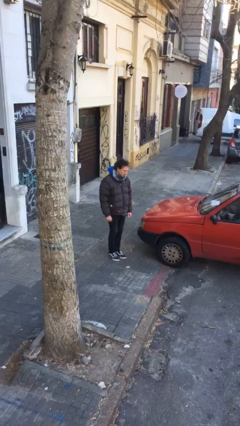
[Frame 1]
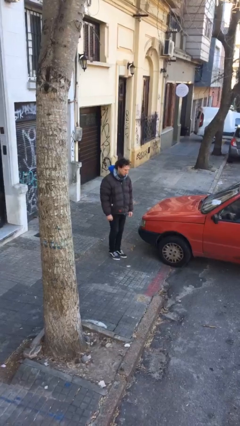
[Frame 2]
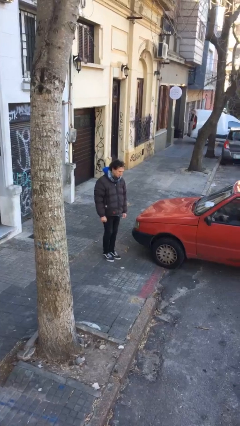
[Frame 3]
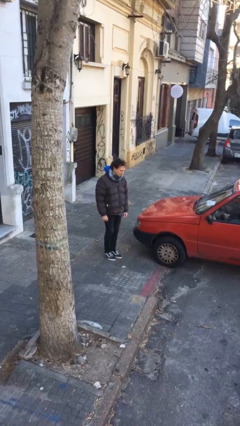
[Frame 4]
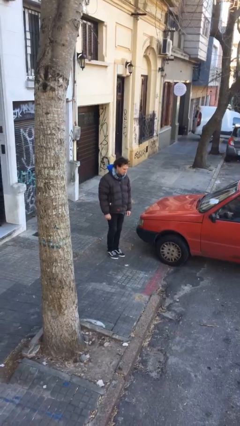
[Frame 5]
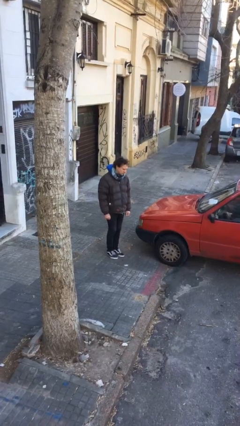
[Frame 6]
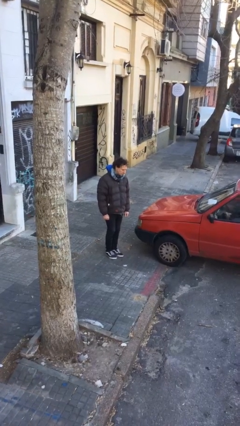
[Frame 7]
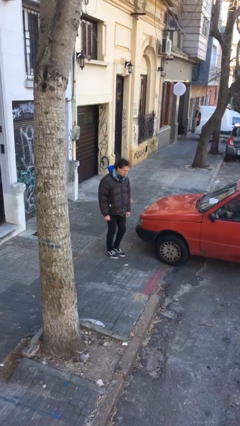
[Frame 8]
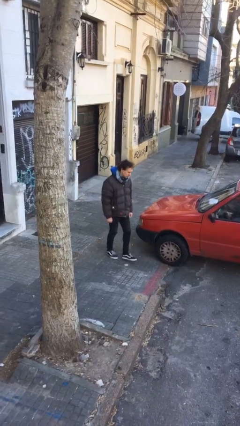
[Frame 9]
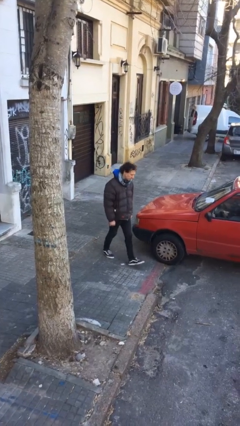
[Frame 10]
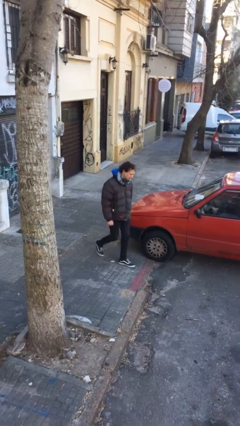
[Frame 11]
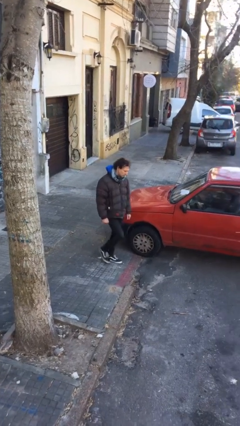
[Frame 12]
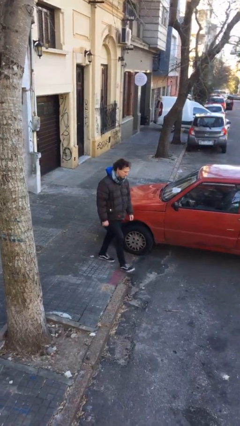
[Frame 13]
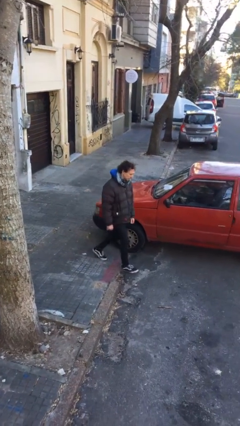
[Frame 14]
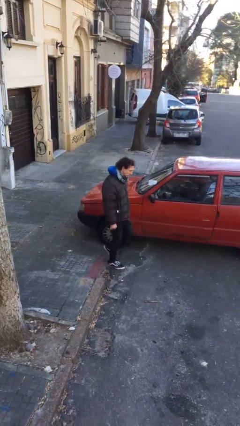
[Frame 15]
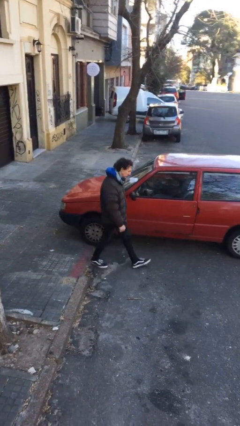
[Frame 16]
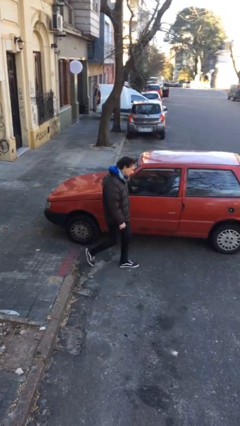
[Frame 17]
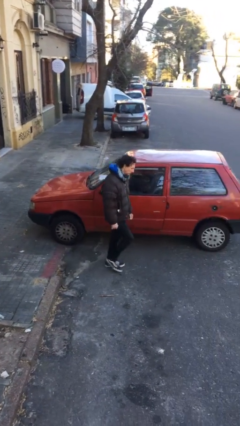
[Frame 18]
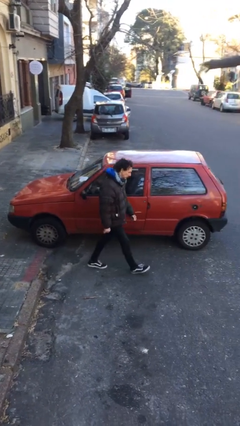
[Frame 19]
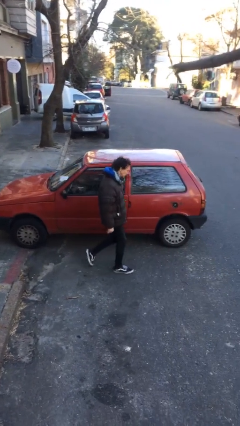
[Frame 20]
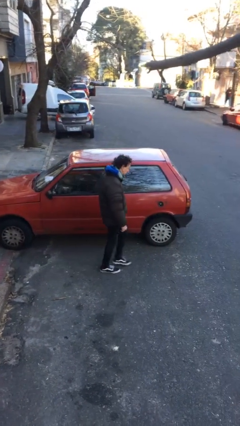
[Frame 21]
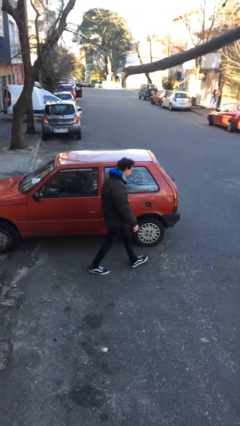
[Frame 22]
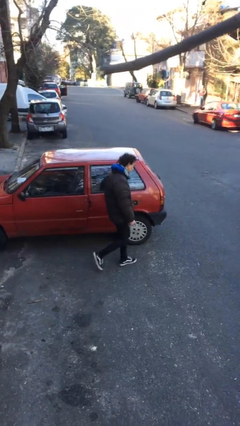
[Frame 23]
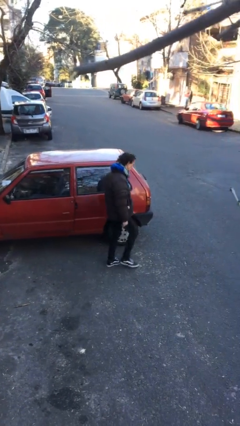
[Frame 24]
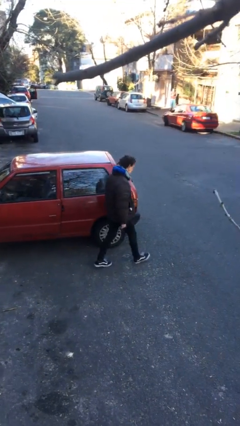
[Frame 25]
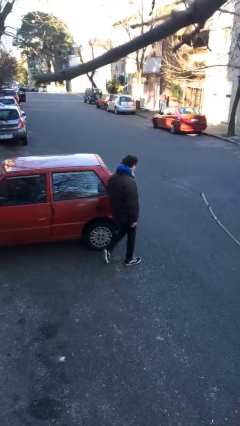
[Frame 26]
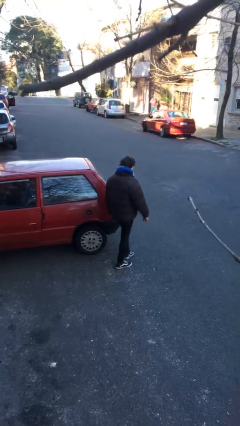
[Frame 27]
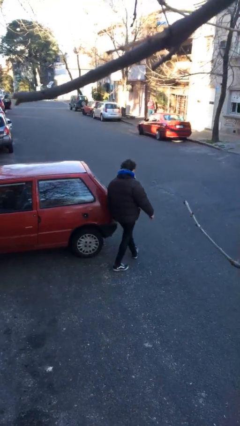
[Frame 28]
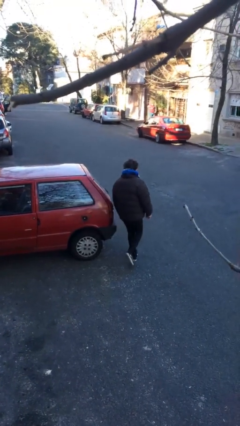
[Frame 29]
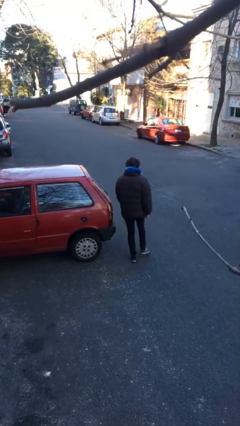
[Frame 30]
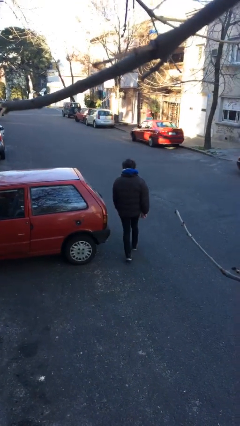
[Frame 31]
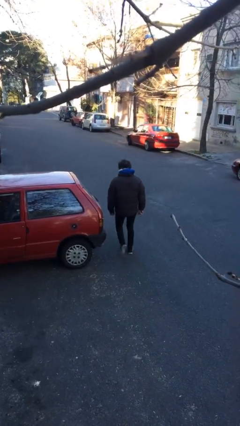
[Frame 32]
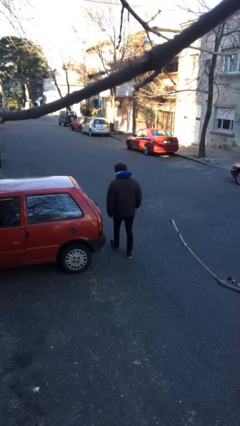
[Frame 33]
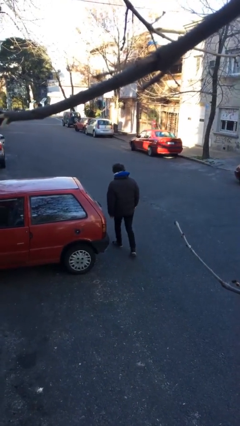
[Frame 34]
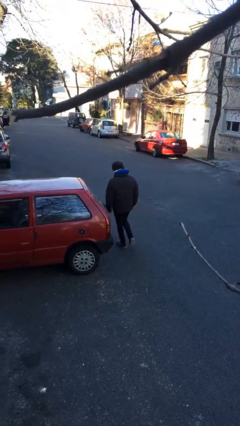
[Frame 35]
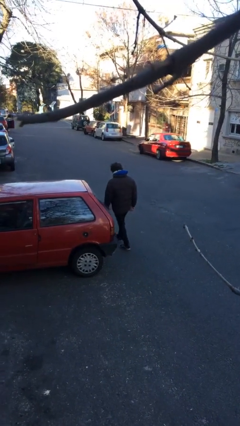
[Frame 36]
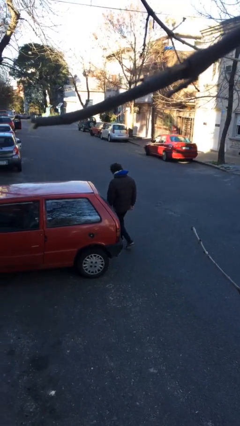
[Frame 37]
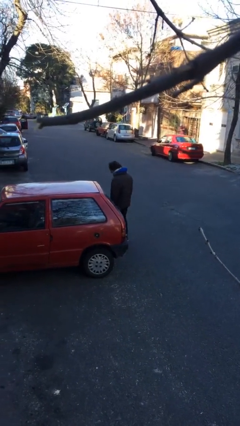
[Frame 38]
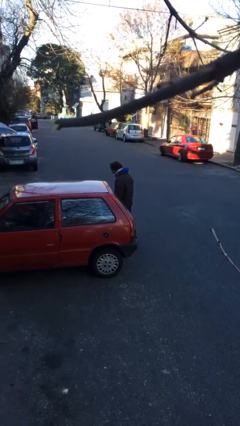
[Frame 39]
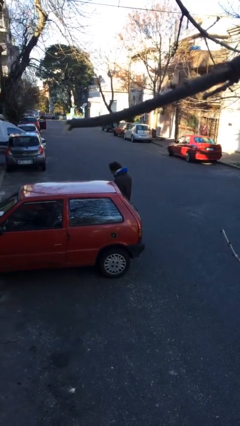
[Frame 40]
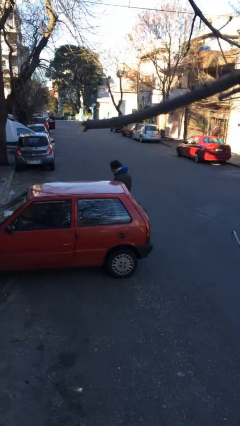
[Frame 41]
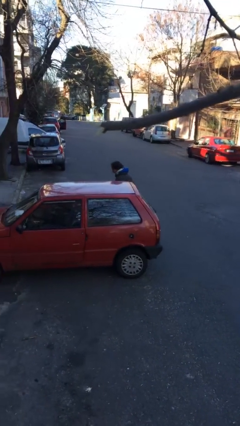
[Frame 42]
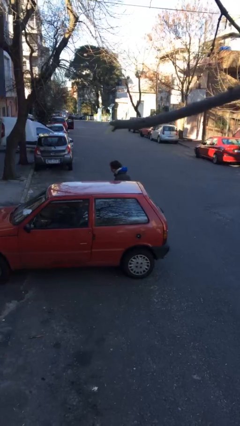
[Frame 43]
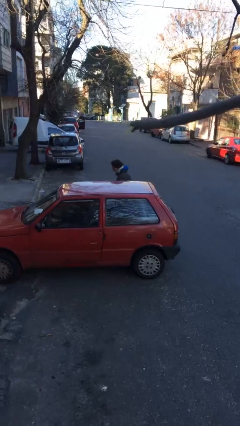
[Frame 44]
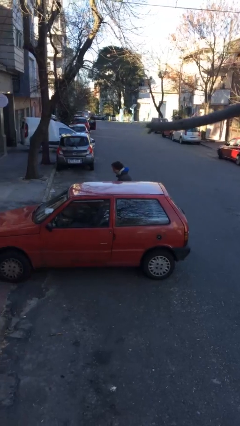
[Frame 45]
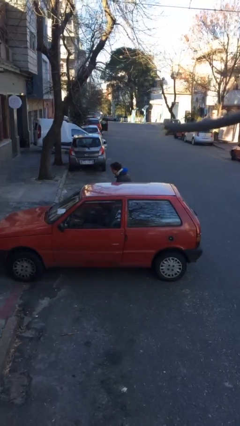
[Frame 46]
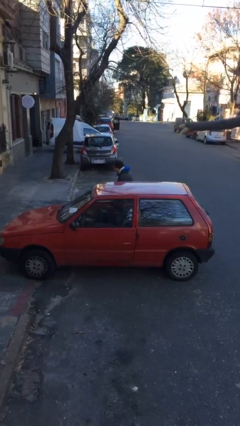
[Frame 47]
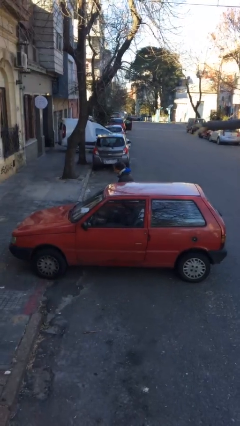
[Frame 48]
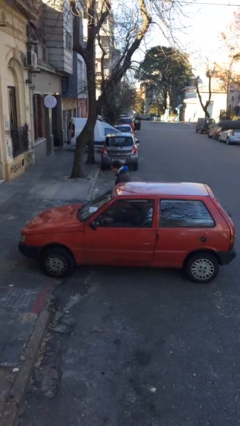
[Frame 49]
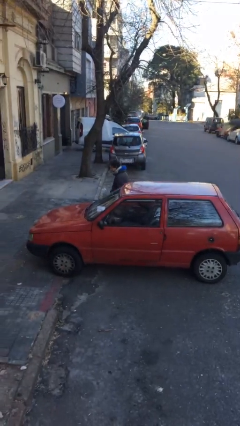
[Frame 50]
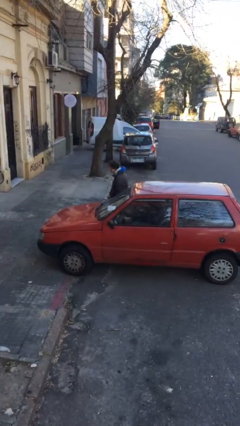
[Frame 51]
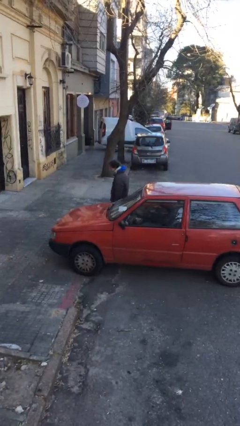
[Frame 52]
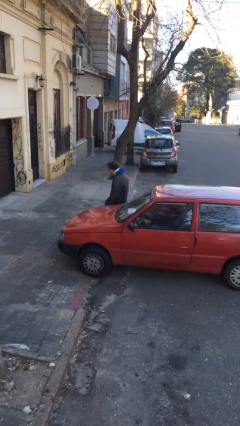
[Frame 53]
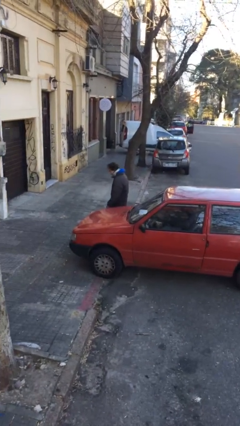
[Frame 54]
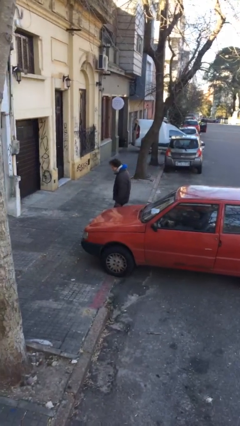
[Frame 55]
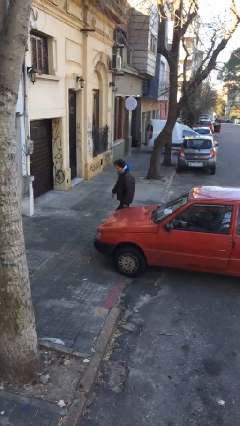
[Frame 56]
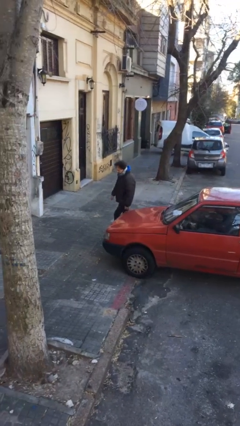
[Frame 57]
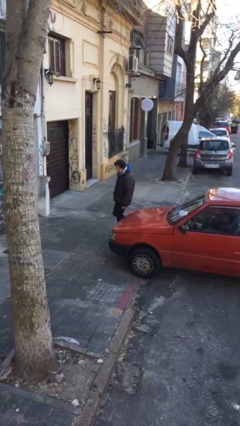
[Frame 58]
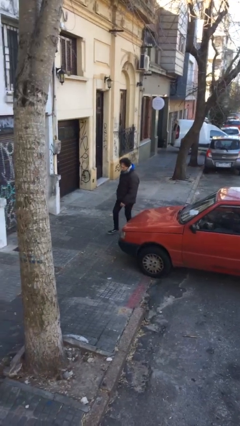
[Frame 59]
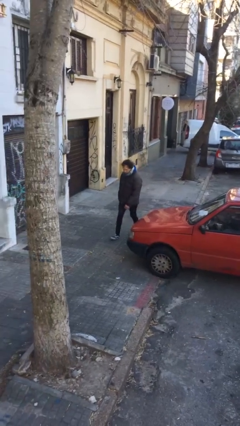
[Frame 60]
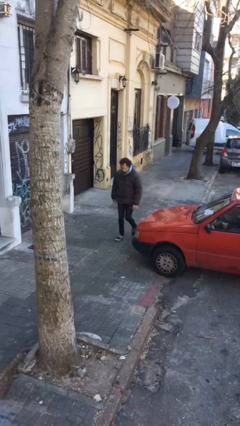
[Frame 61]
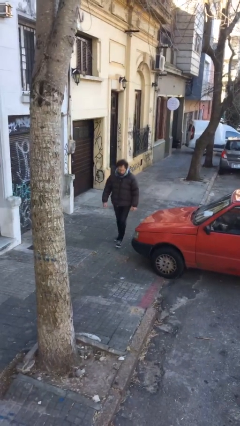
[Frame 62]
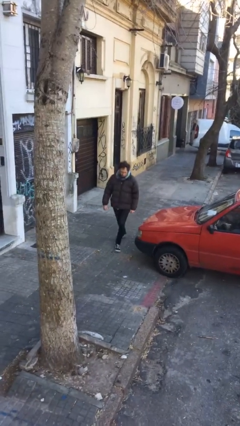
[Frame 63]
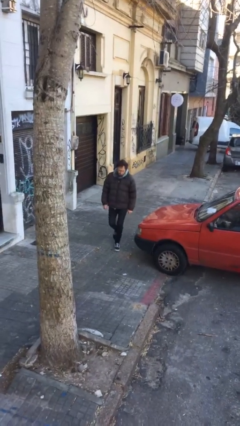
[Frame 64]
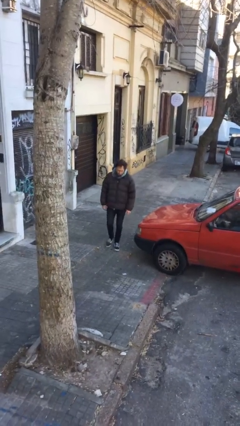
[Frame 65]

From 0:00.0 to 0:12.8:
person walks around car

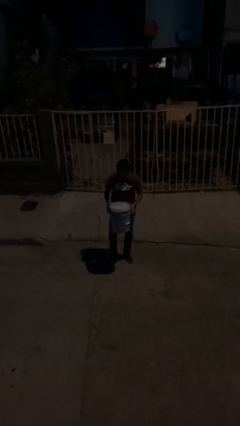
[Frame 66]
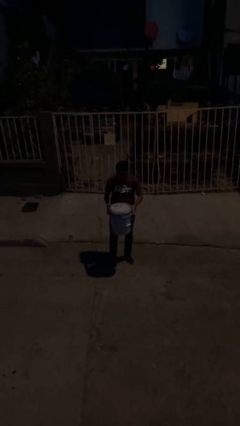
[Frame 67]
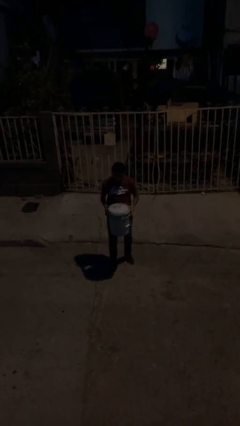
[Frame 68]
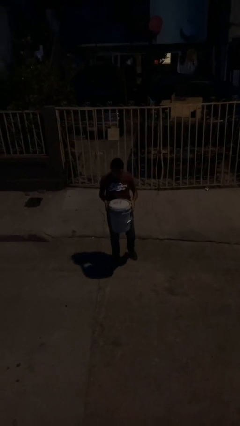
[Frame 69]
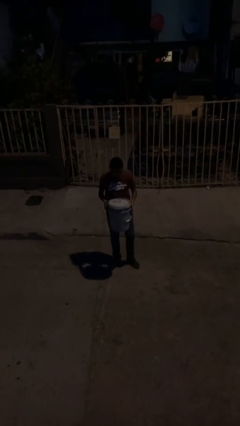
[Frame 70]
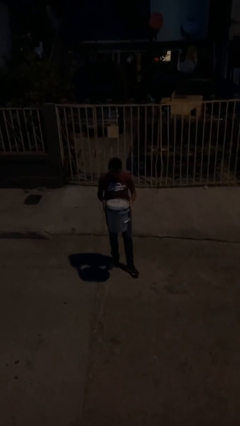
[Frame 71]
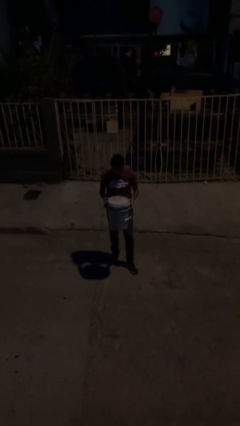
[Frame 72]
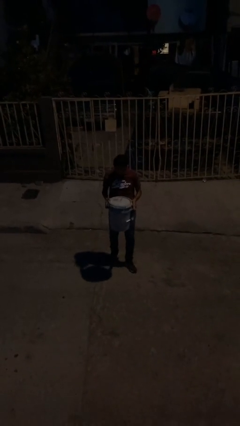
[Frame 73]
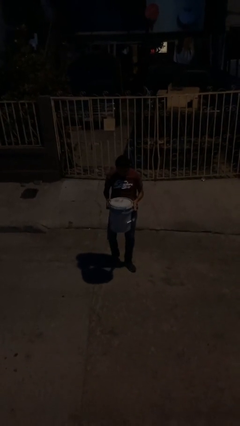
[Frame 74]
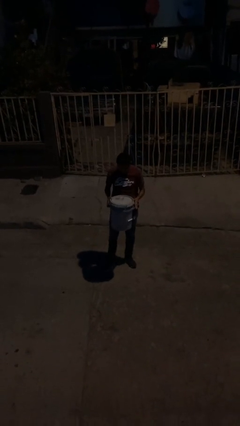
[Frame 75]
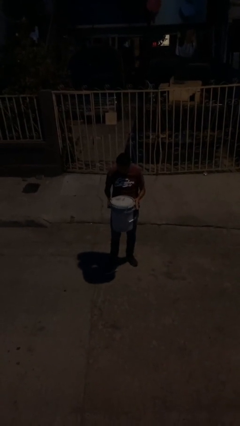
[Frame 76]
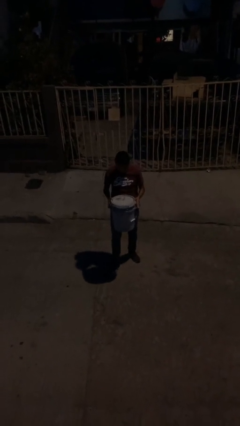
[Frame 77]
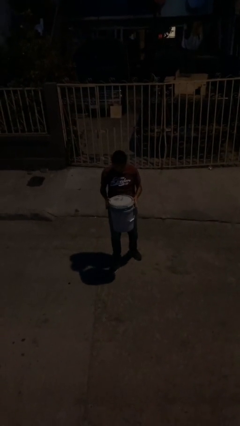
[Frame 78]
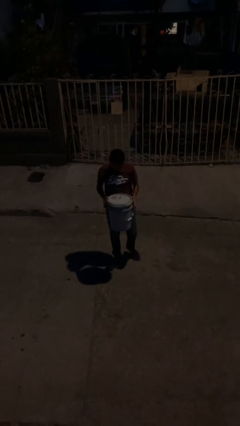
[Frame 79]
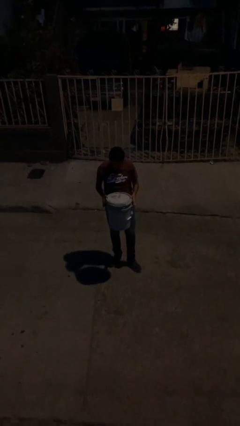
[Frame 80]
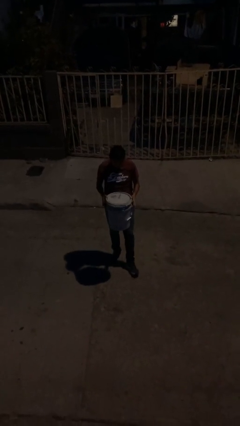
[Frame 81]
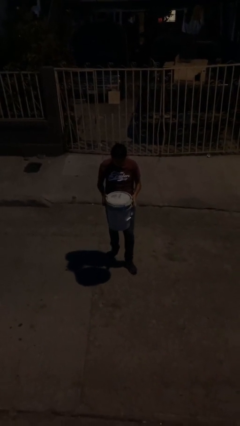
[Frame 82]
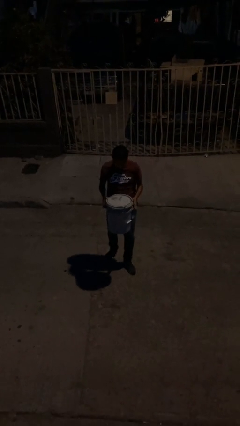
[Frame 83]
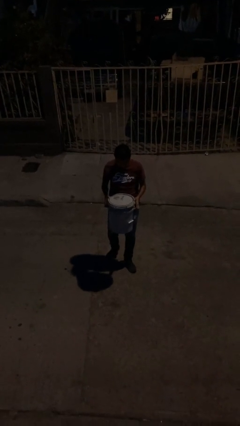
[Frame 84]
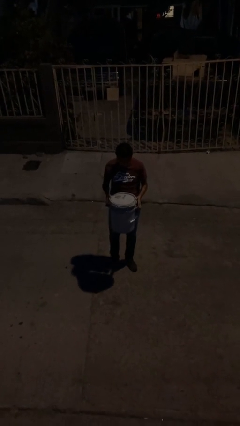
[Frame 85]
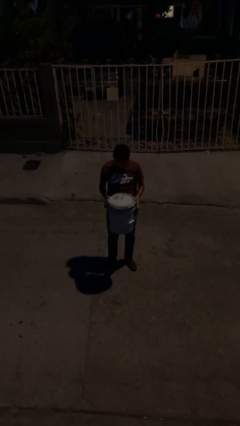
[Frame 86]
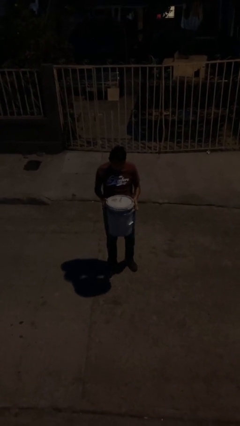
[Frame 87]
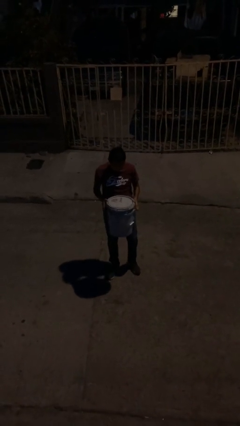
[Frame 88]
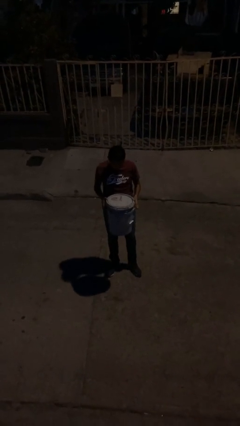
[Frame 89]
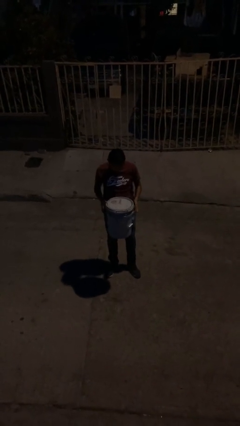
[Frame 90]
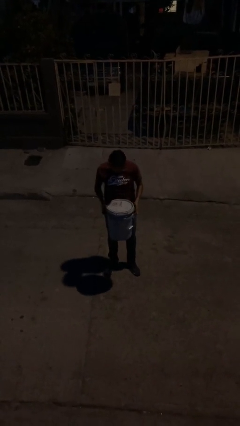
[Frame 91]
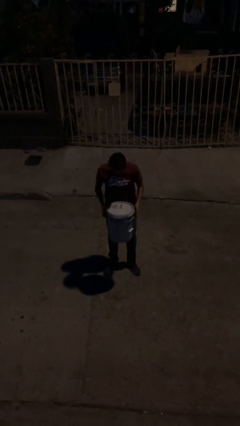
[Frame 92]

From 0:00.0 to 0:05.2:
person carries heavy object
